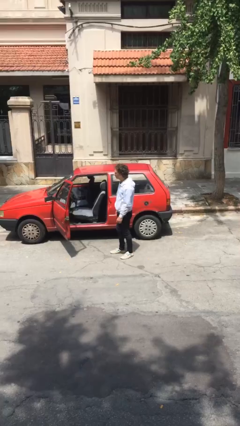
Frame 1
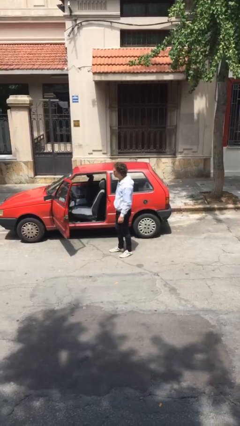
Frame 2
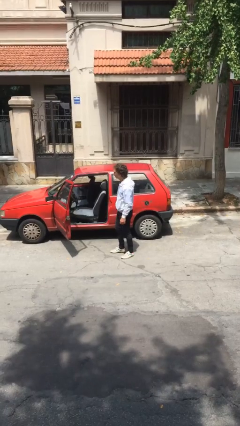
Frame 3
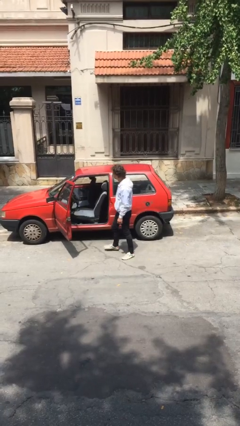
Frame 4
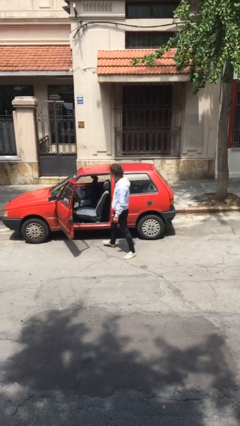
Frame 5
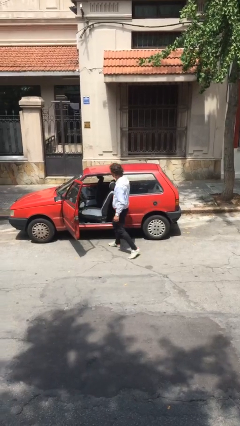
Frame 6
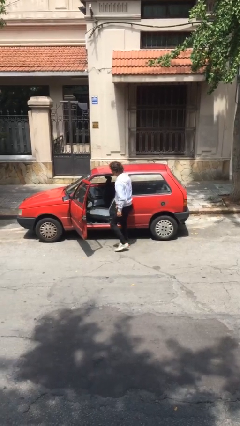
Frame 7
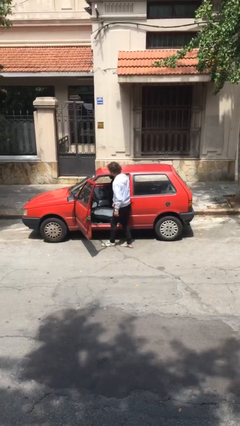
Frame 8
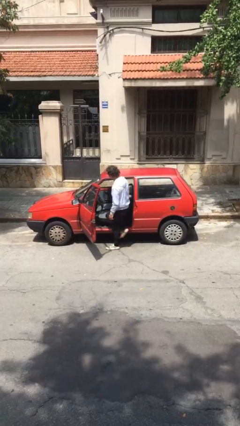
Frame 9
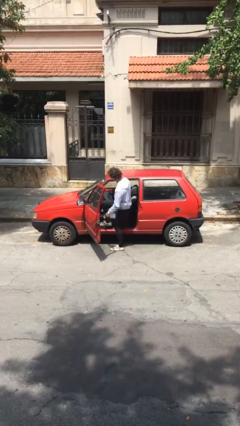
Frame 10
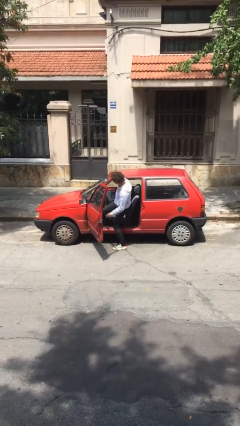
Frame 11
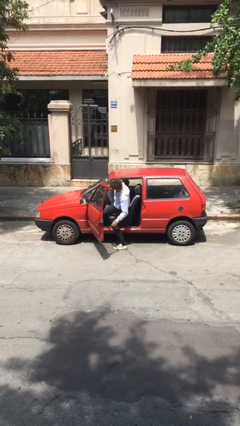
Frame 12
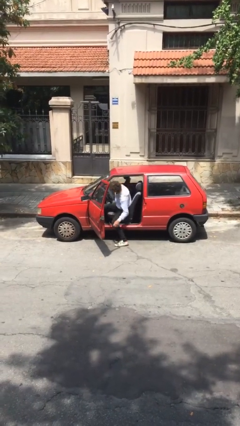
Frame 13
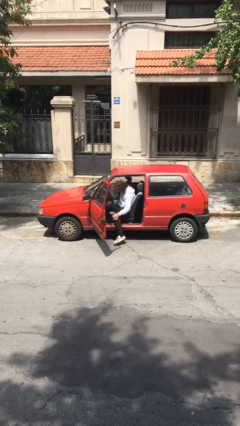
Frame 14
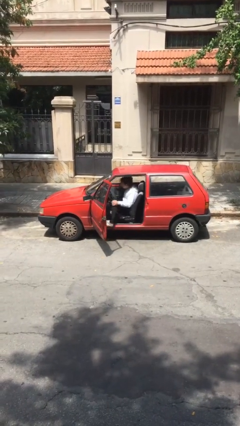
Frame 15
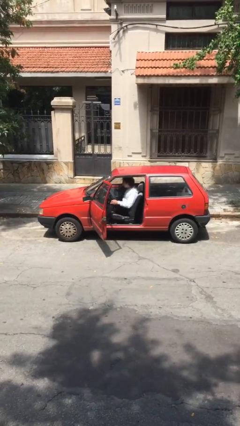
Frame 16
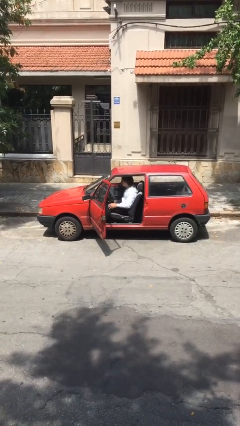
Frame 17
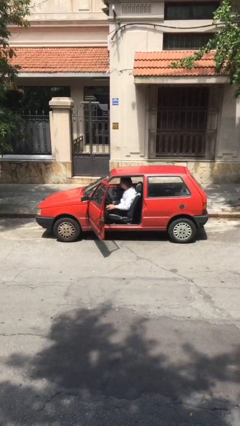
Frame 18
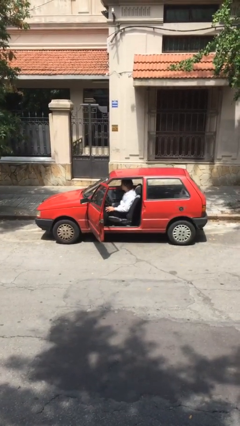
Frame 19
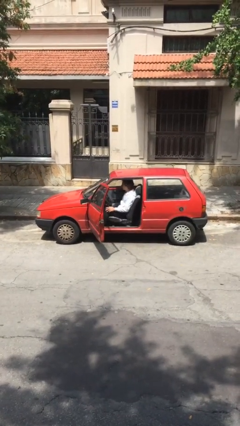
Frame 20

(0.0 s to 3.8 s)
person enters car

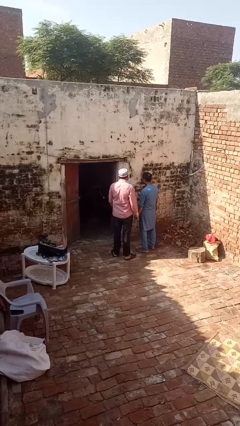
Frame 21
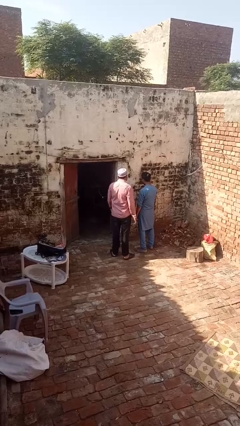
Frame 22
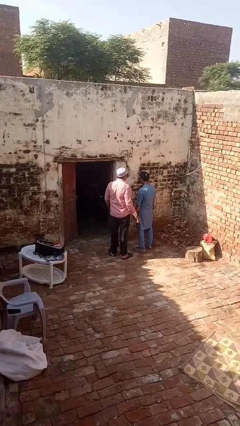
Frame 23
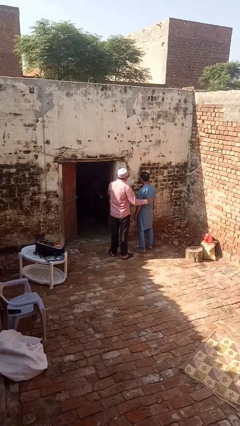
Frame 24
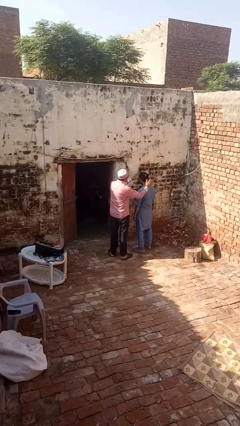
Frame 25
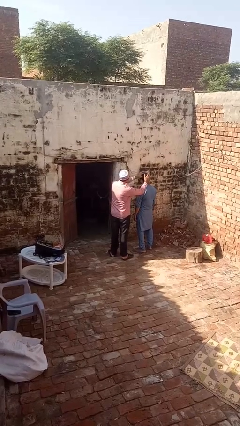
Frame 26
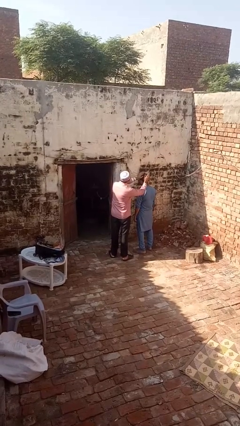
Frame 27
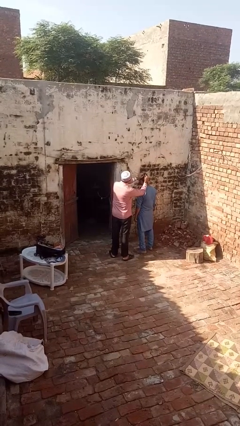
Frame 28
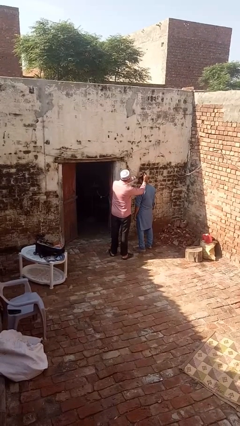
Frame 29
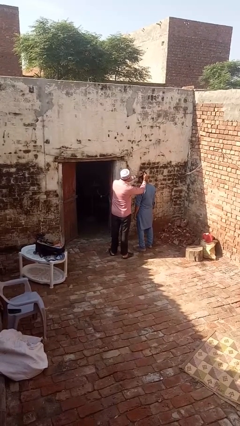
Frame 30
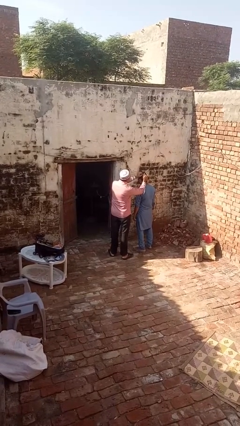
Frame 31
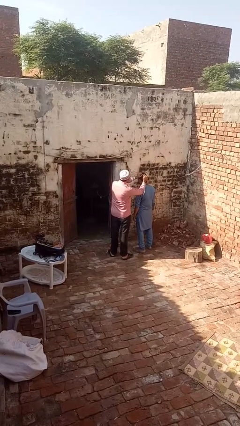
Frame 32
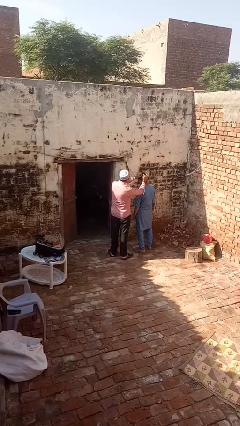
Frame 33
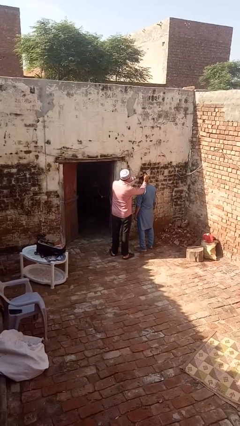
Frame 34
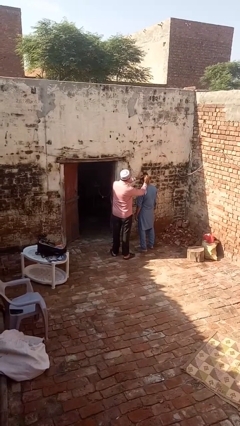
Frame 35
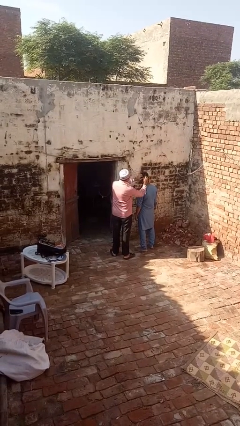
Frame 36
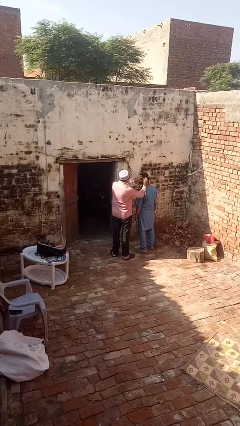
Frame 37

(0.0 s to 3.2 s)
person grabs person by hair

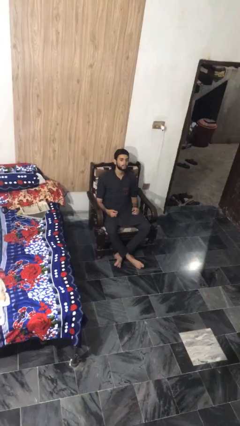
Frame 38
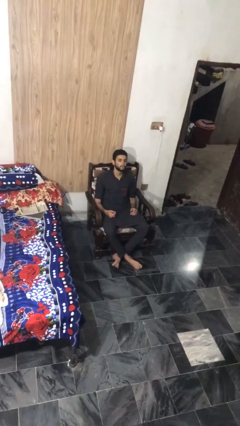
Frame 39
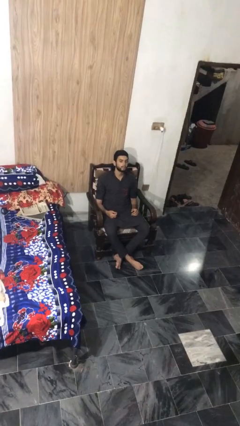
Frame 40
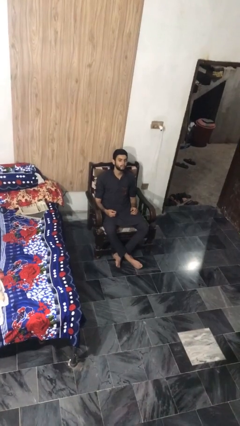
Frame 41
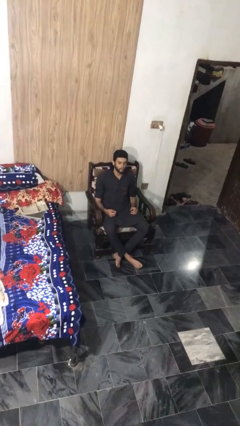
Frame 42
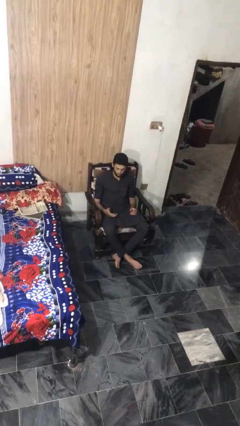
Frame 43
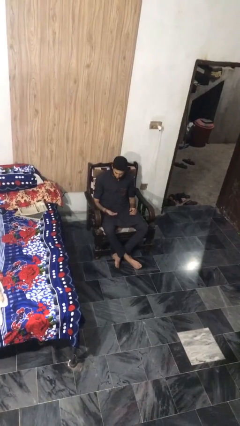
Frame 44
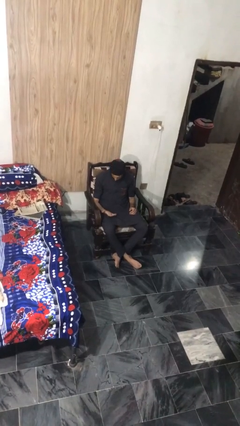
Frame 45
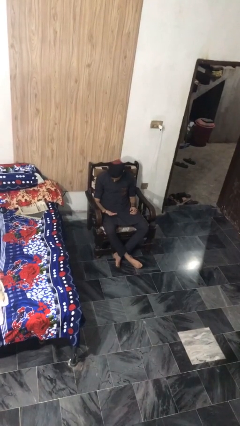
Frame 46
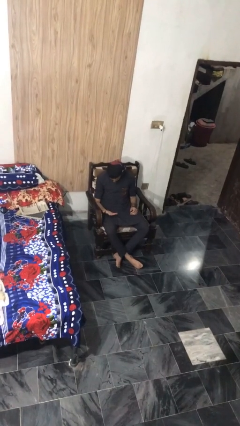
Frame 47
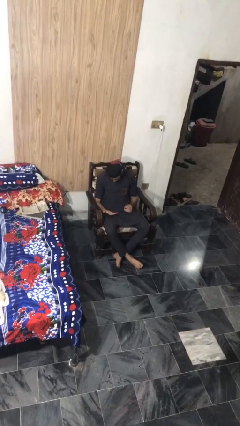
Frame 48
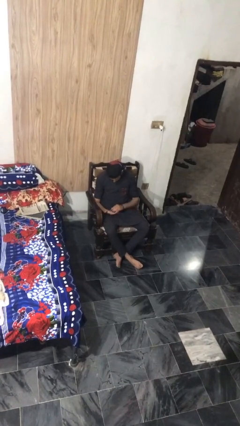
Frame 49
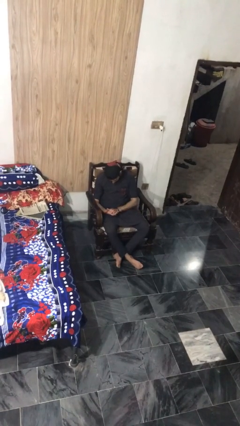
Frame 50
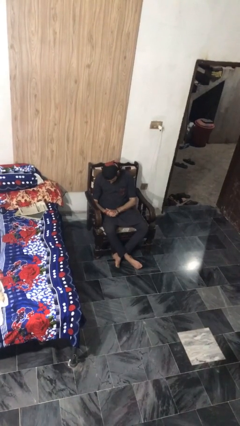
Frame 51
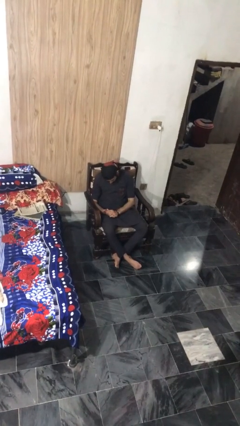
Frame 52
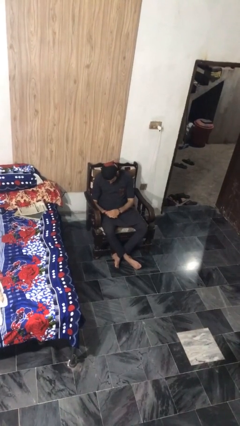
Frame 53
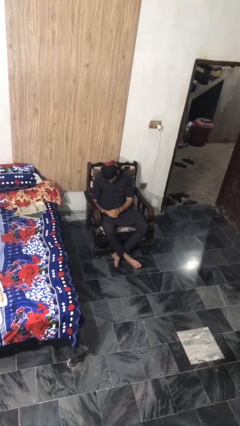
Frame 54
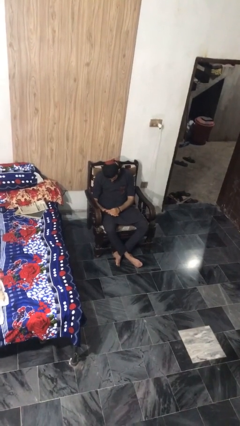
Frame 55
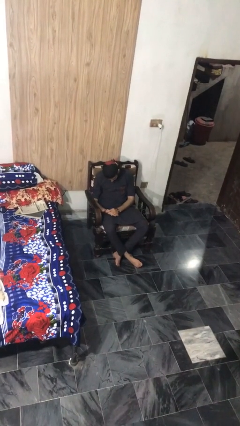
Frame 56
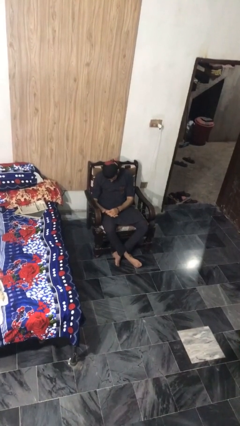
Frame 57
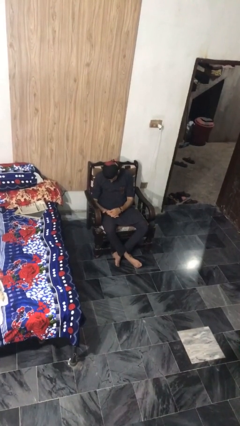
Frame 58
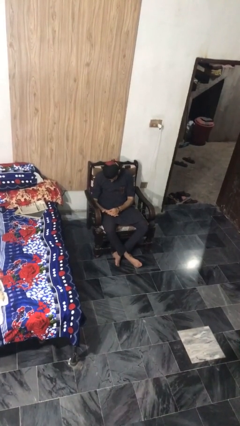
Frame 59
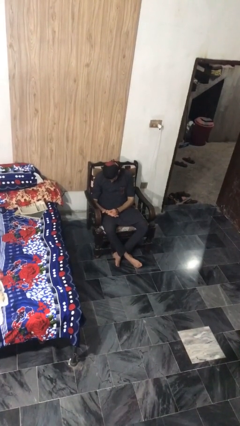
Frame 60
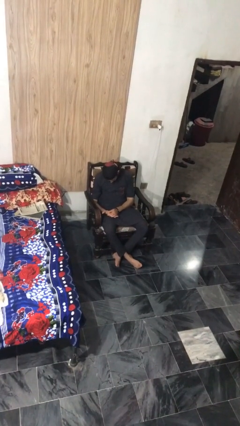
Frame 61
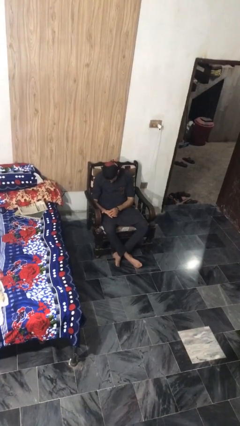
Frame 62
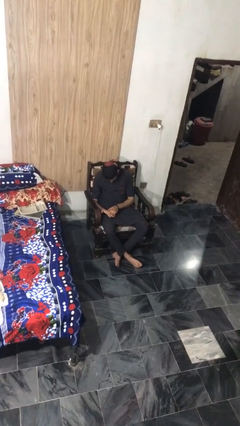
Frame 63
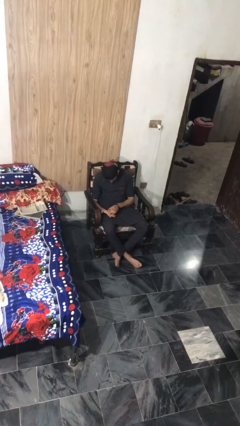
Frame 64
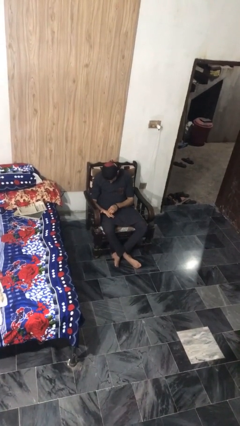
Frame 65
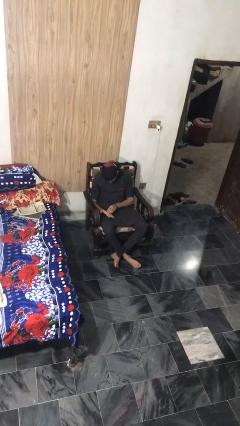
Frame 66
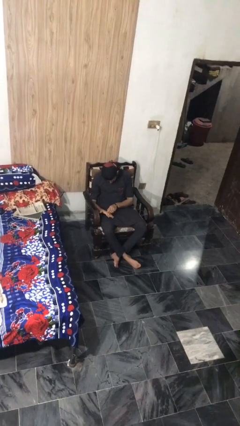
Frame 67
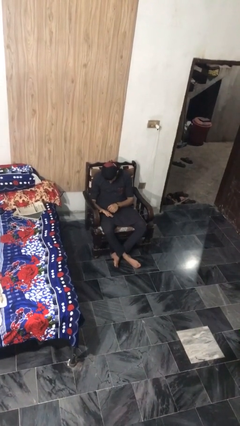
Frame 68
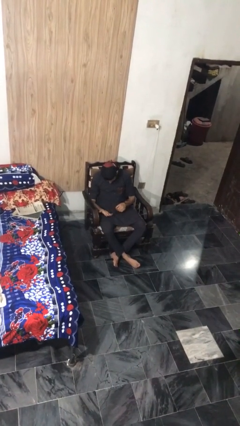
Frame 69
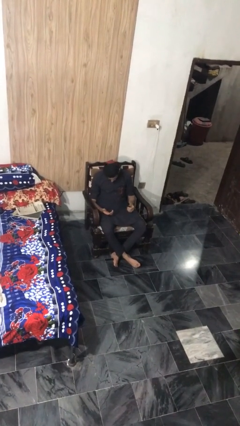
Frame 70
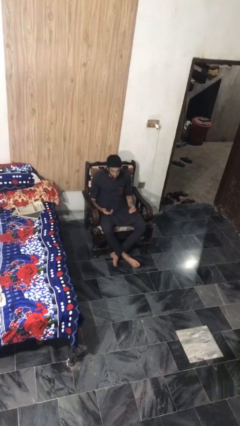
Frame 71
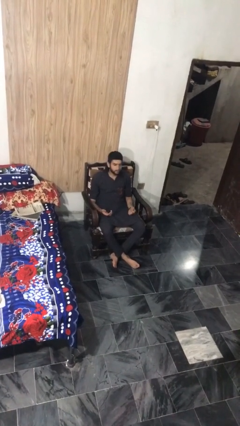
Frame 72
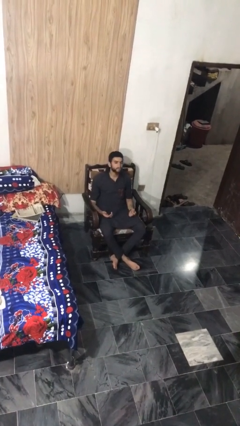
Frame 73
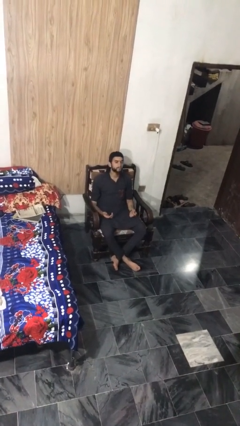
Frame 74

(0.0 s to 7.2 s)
person looks at hands in lap

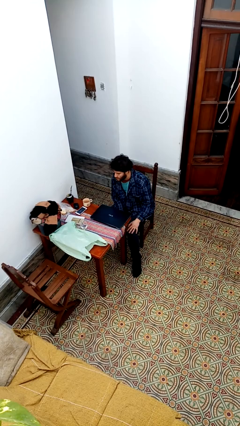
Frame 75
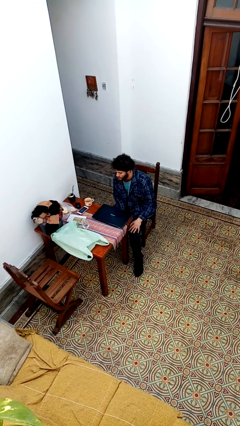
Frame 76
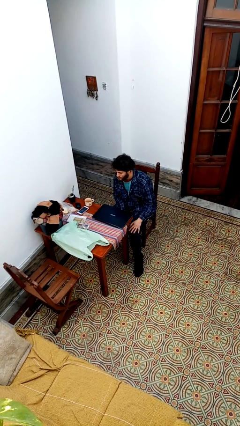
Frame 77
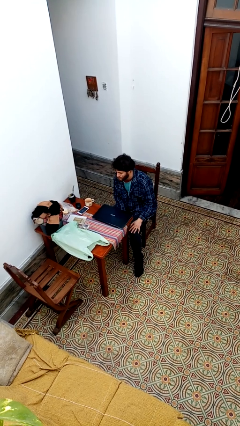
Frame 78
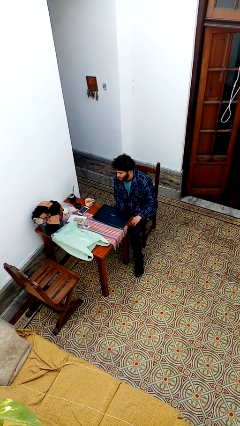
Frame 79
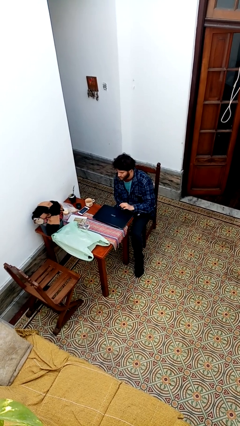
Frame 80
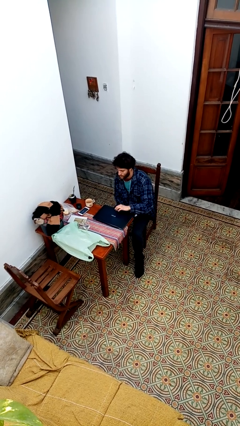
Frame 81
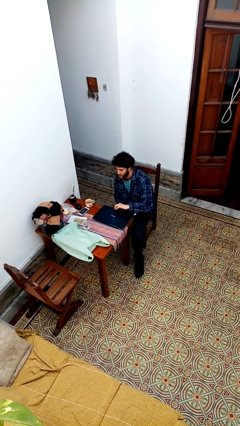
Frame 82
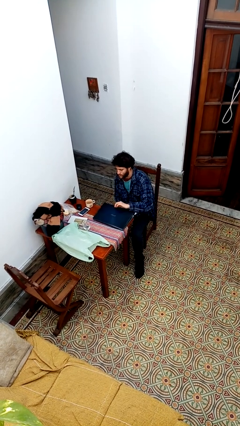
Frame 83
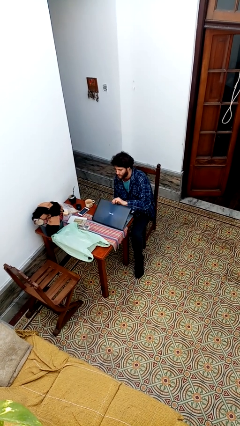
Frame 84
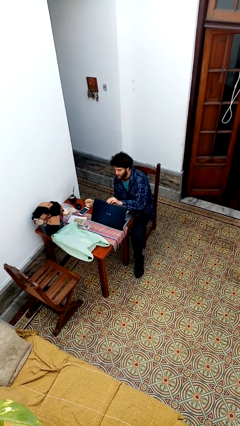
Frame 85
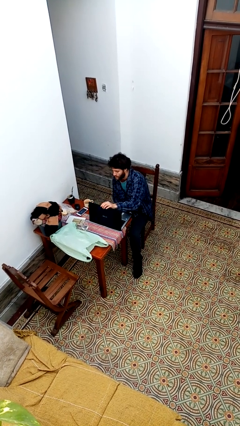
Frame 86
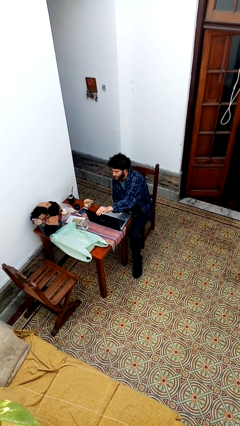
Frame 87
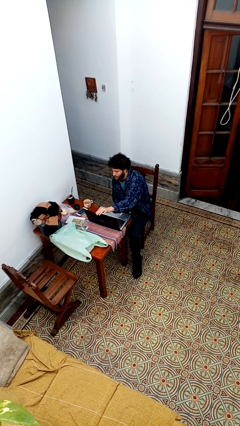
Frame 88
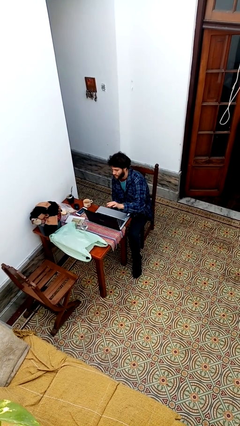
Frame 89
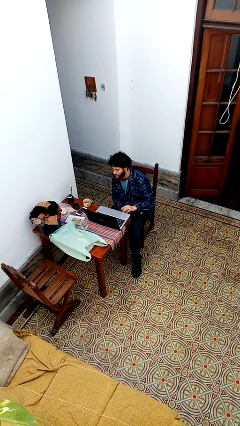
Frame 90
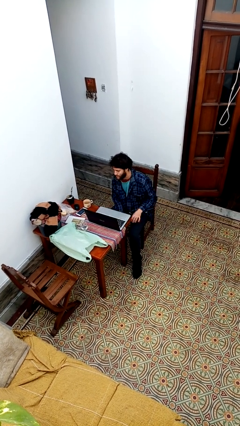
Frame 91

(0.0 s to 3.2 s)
person opens laptop

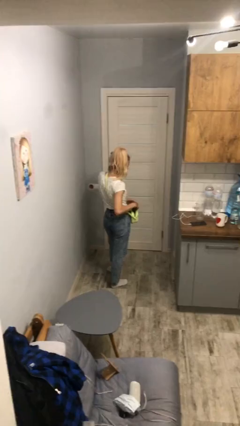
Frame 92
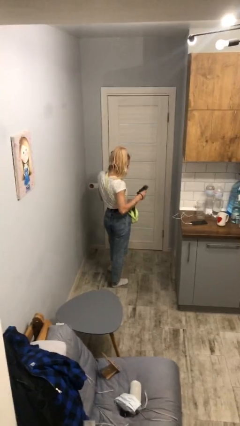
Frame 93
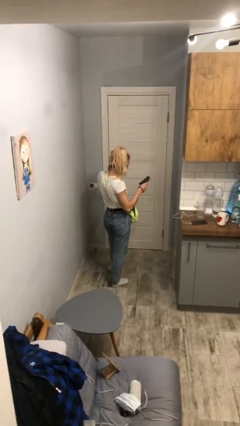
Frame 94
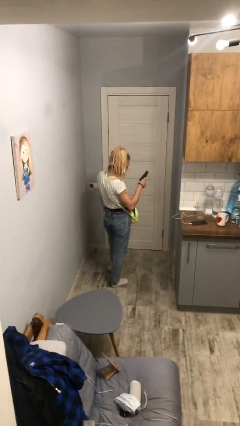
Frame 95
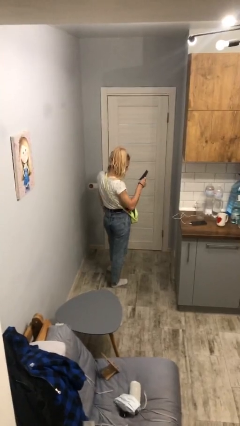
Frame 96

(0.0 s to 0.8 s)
person takes object from purse
